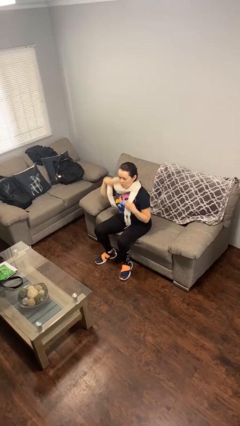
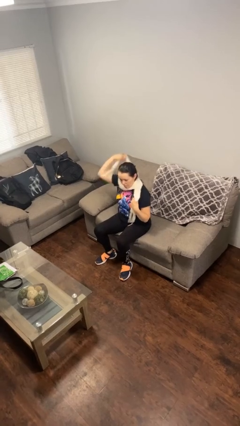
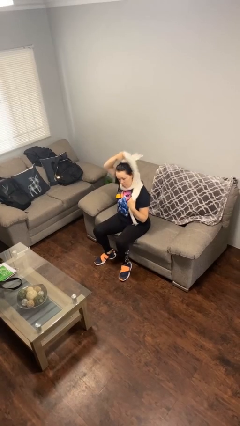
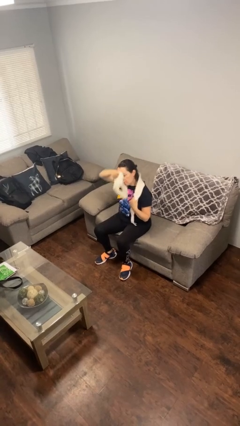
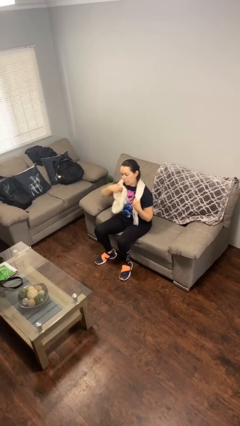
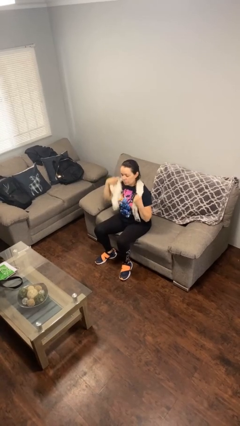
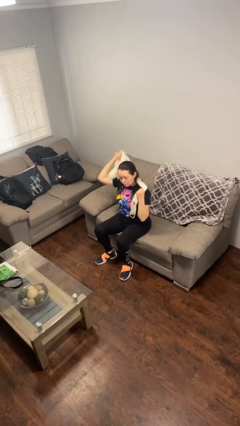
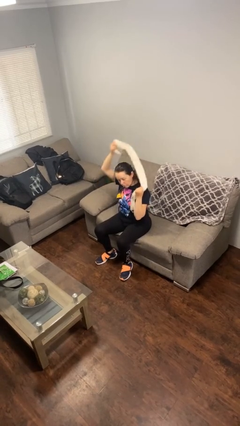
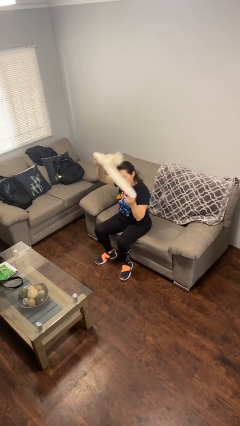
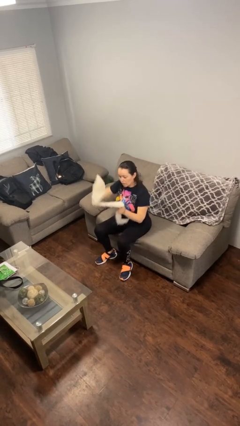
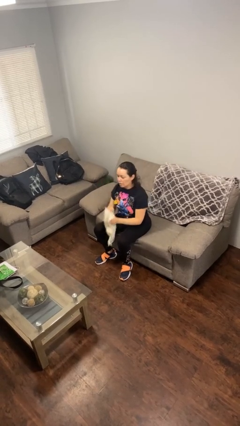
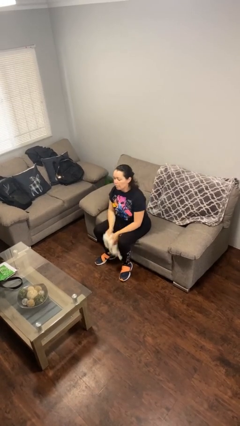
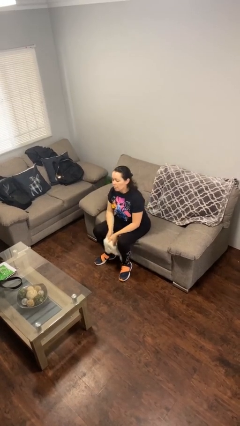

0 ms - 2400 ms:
person takes off scarf

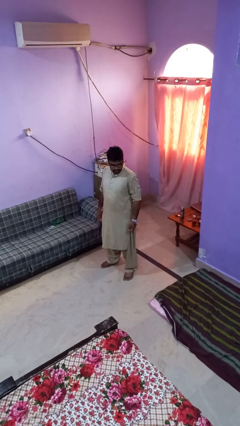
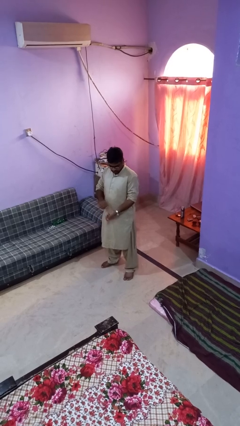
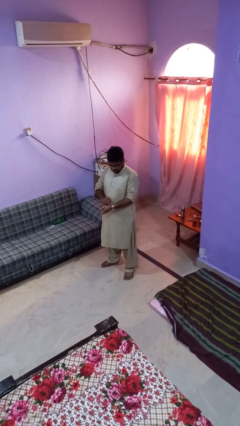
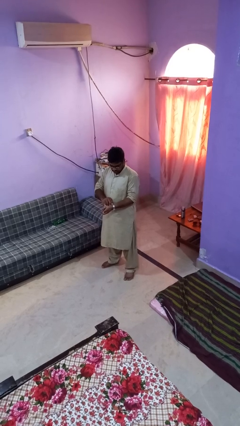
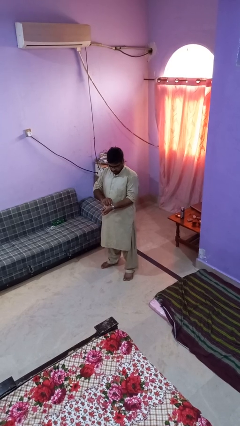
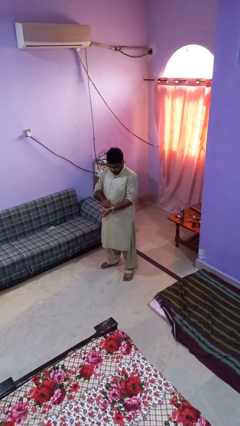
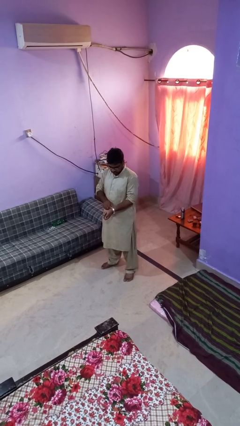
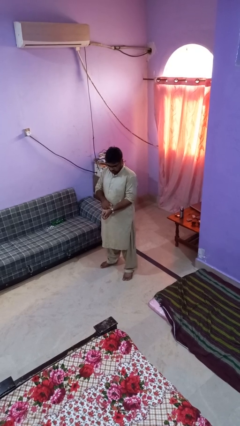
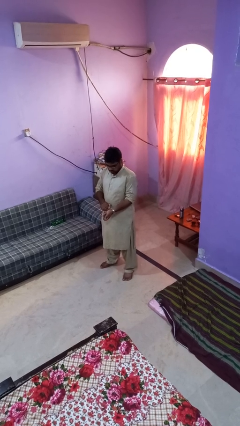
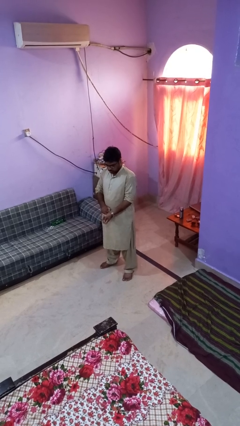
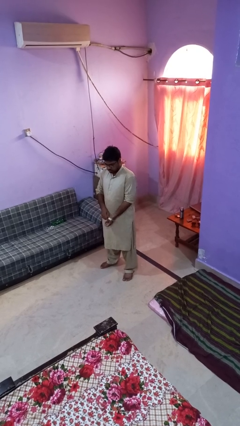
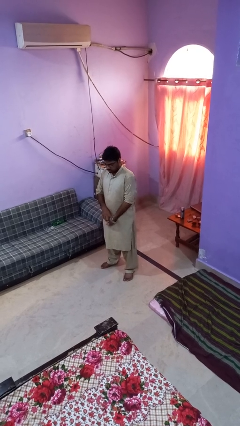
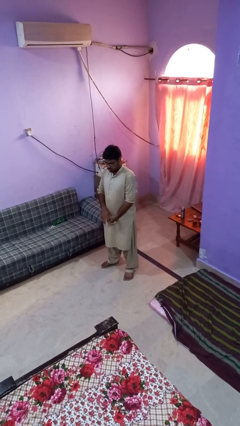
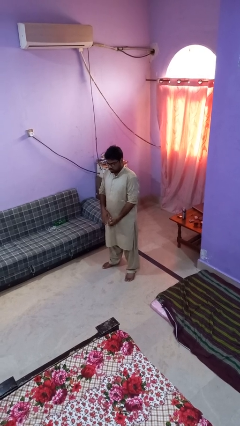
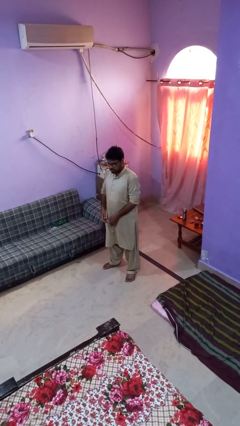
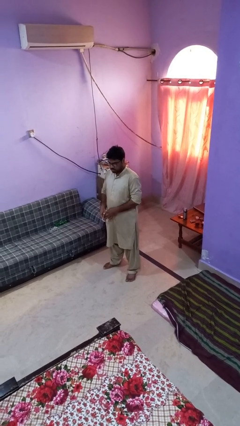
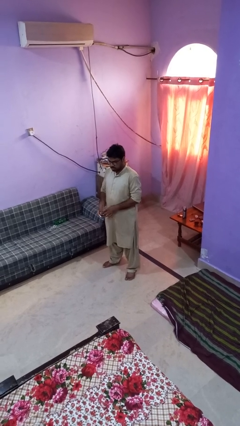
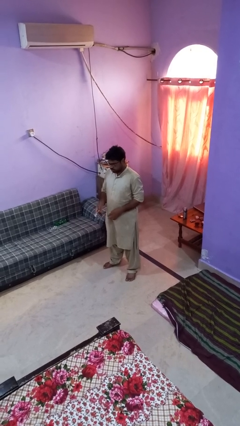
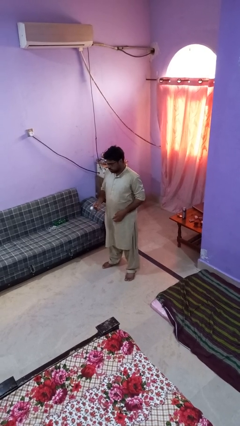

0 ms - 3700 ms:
person takes off wristwatch

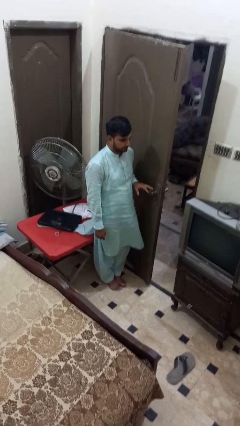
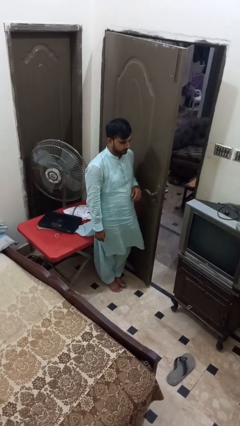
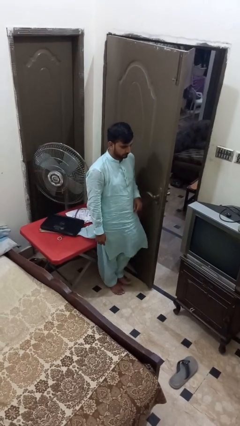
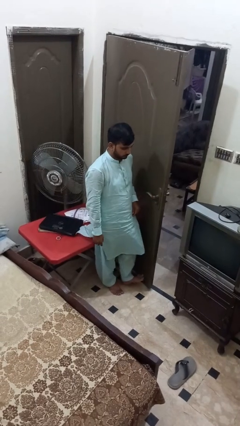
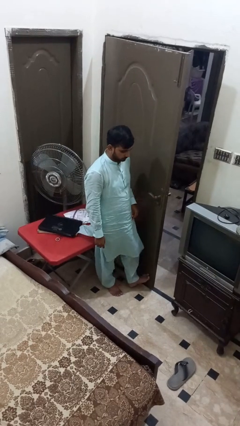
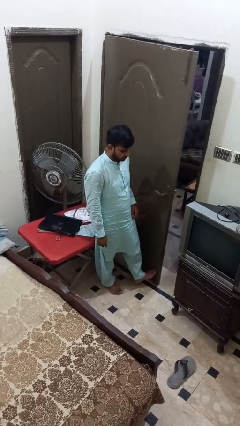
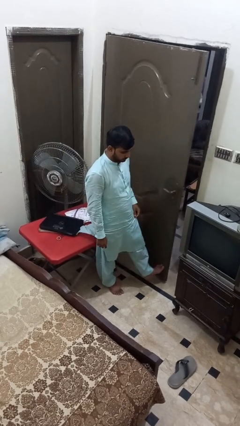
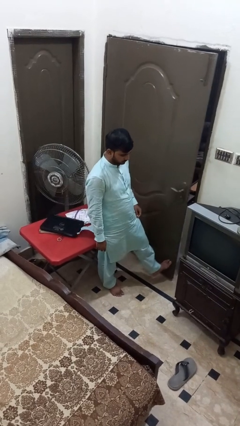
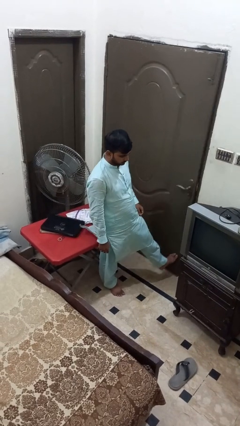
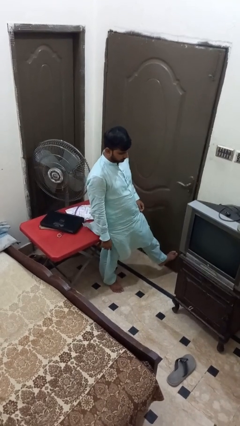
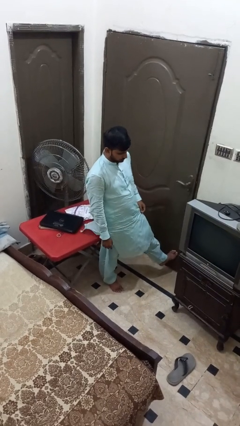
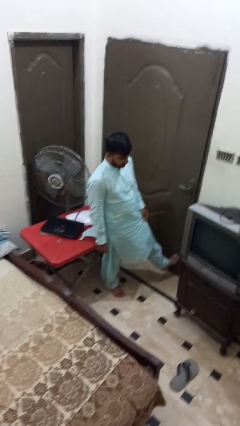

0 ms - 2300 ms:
person closes door with foot

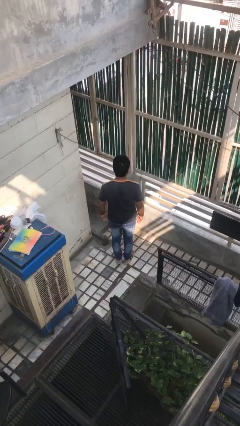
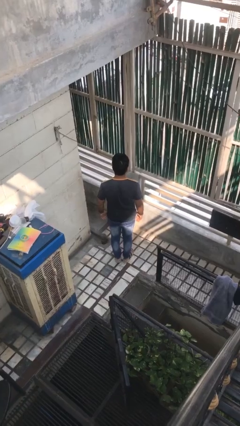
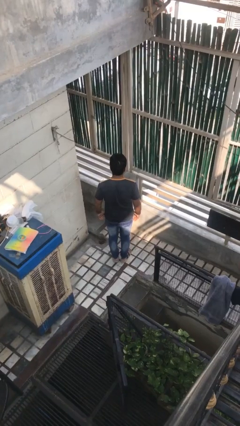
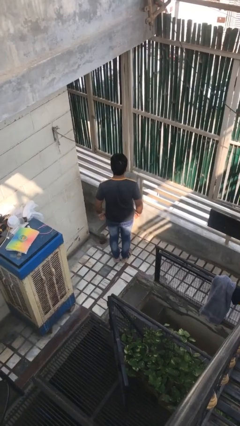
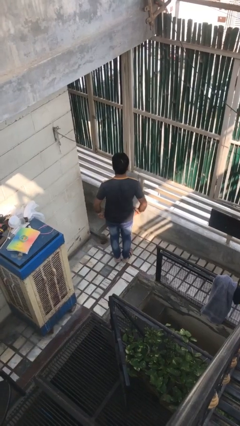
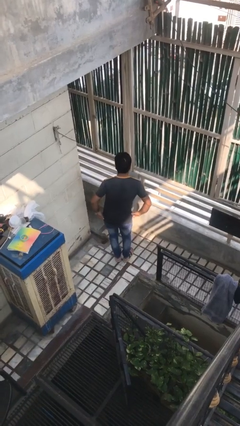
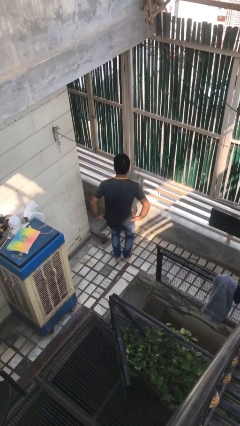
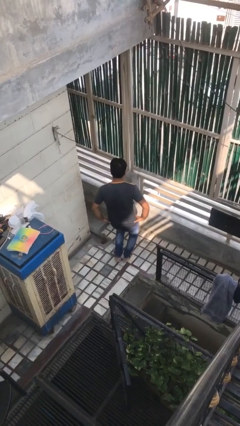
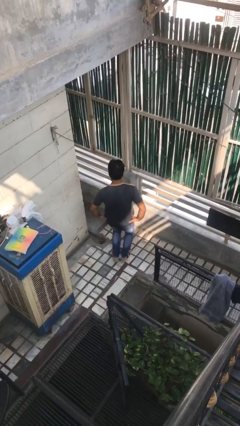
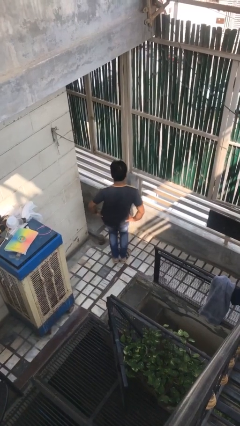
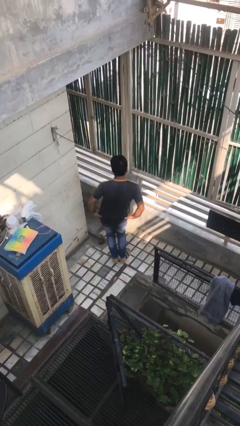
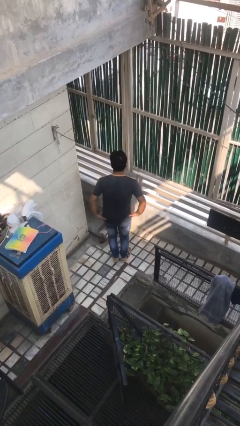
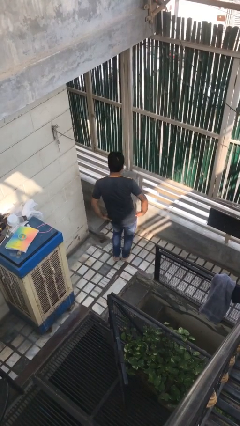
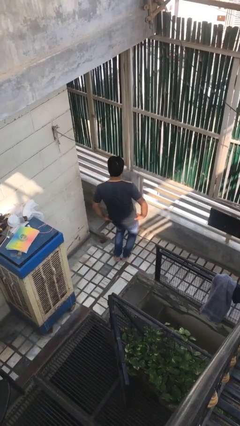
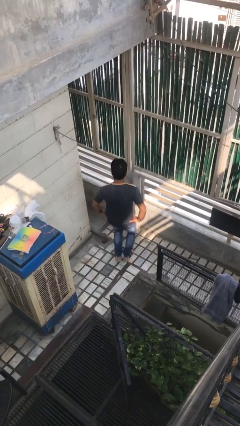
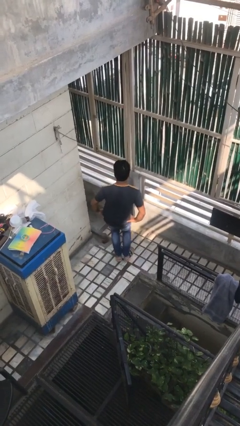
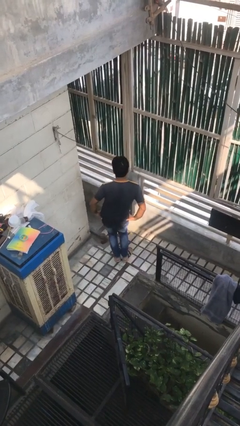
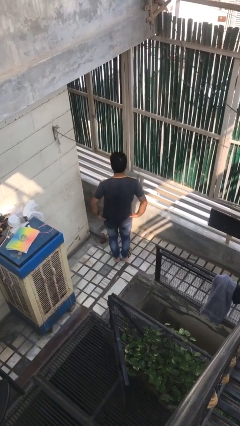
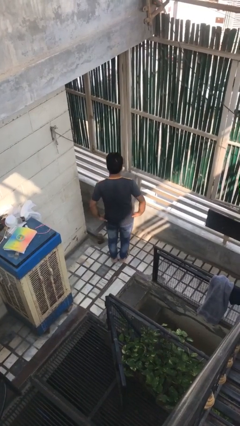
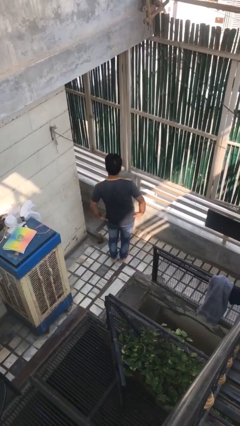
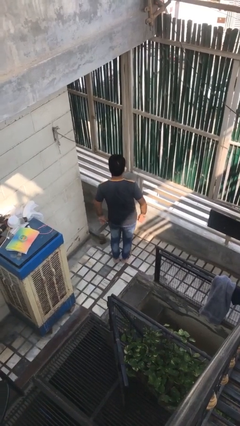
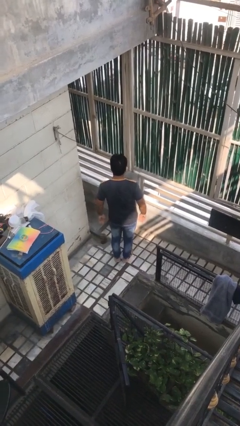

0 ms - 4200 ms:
person wiggles hips

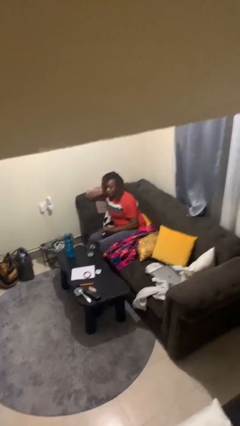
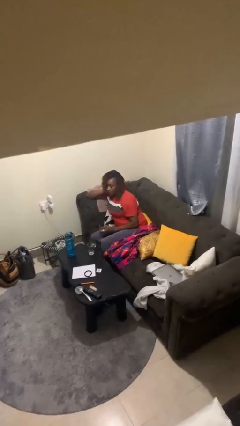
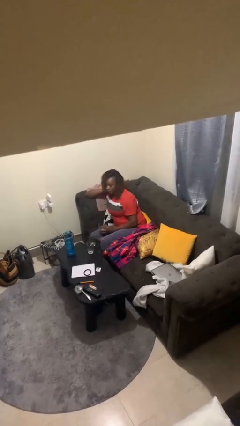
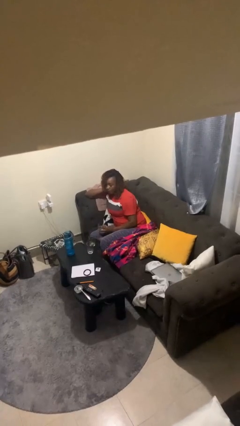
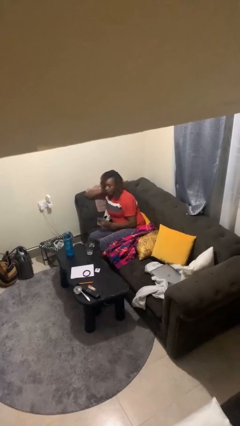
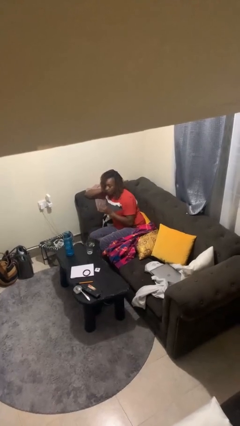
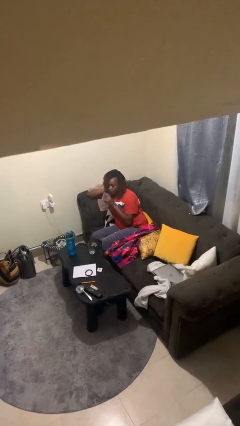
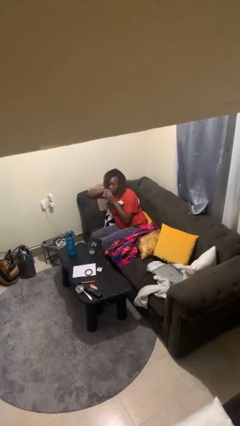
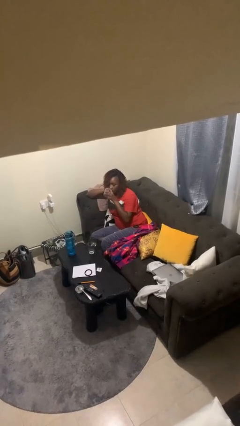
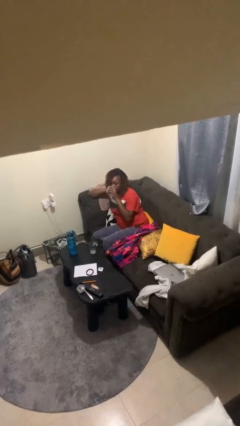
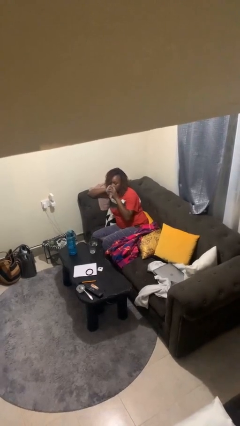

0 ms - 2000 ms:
person drinks from shotglass

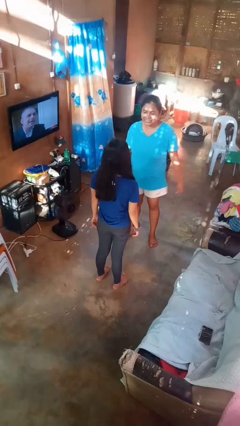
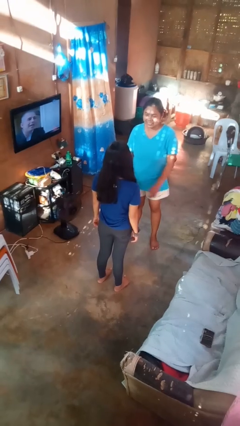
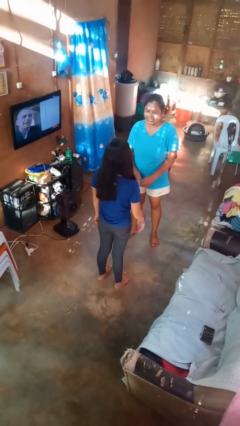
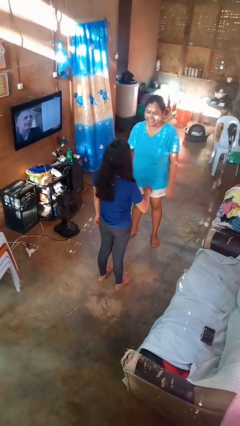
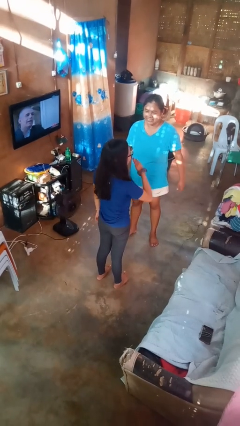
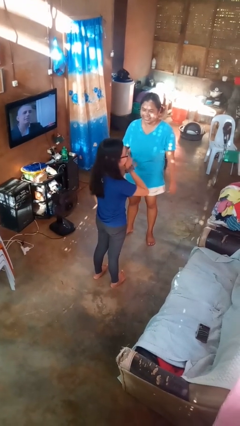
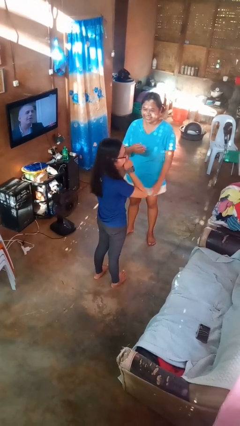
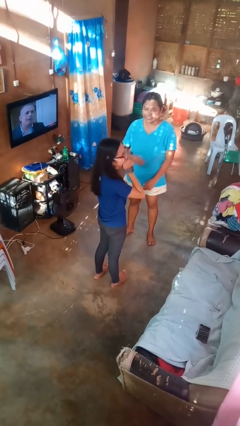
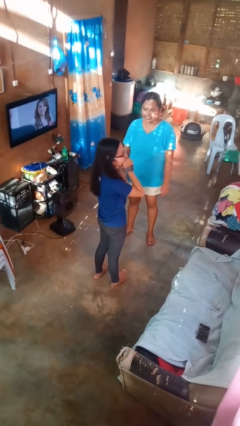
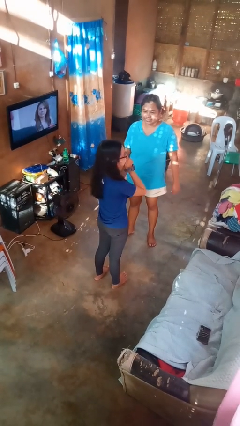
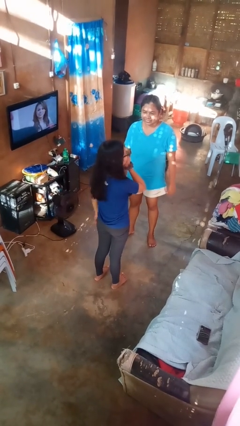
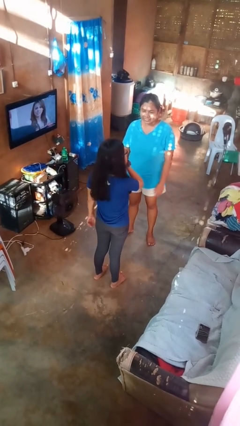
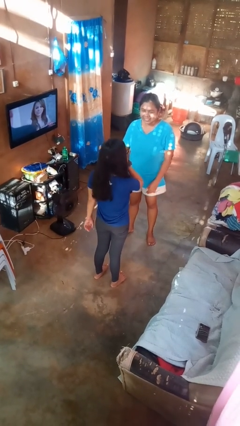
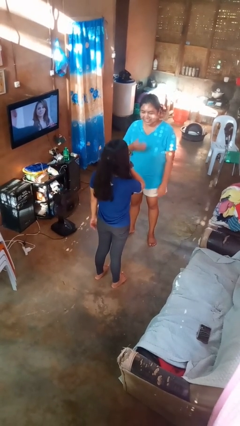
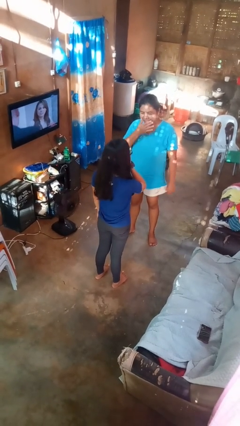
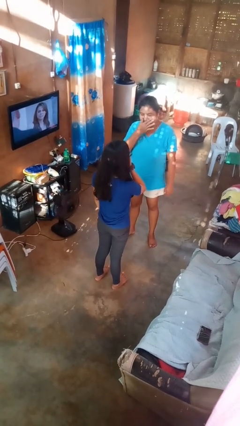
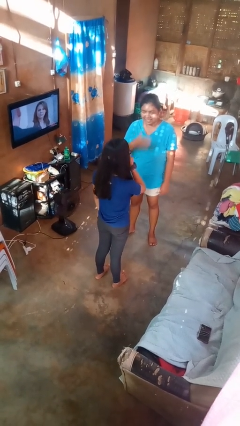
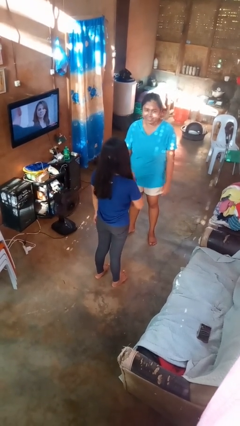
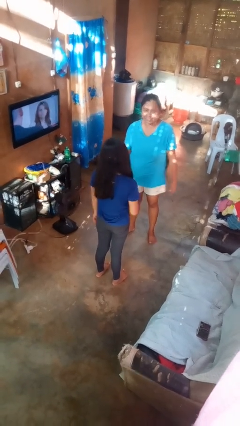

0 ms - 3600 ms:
person laughs with person
